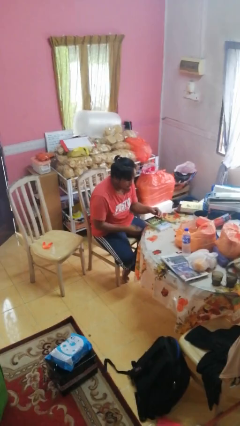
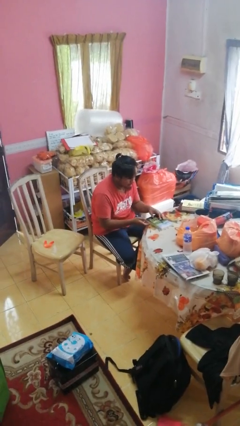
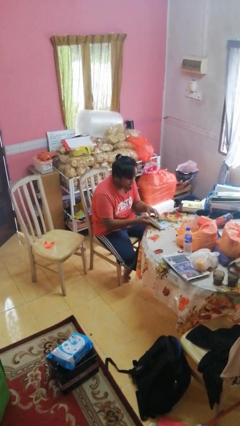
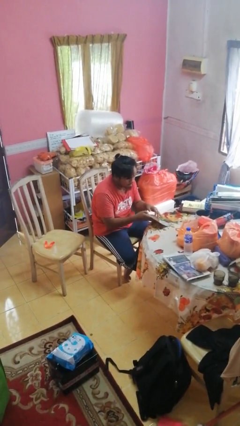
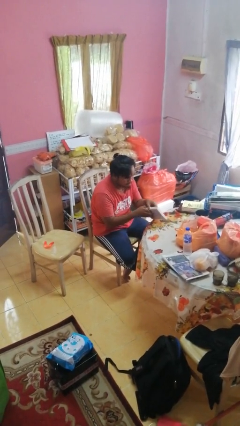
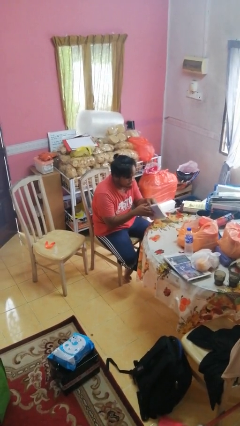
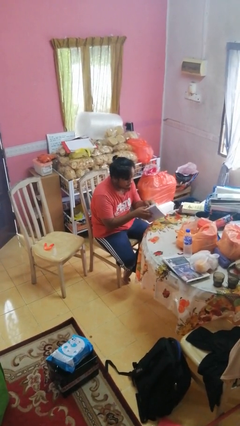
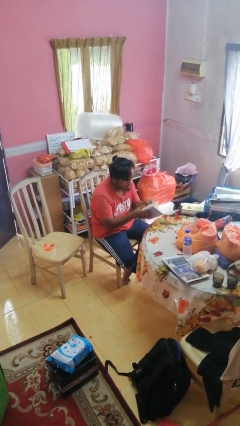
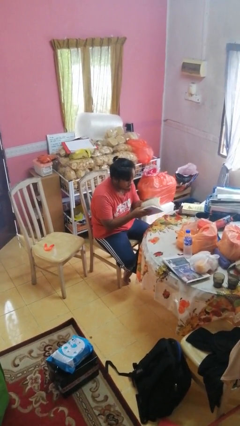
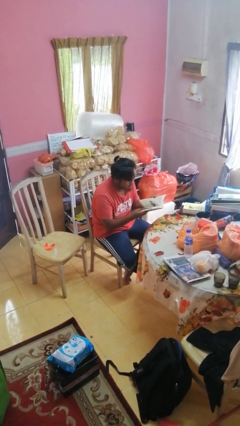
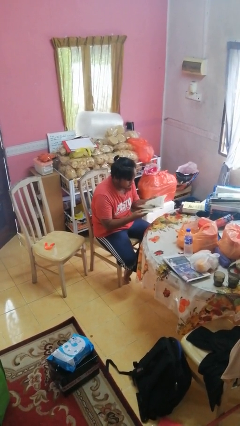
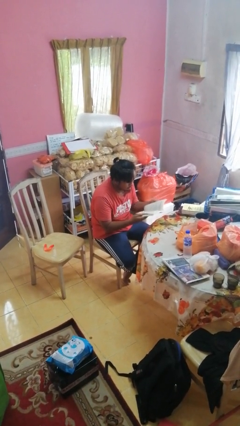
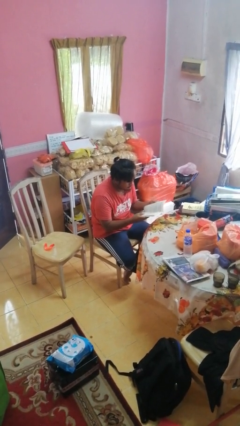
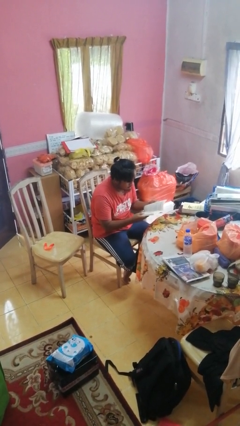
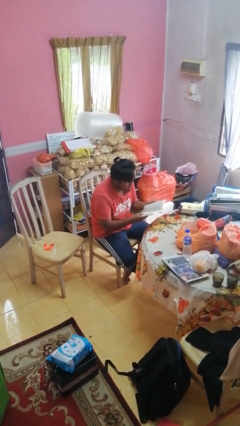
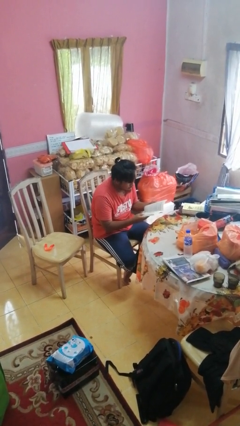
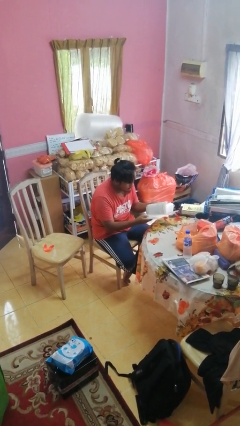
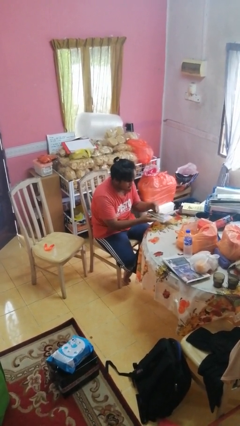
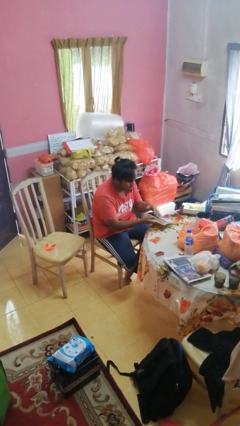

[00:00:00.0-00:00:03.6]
person reads book

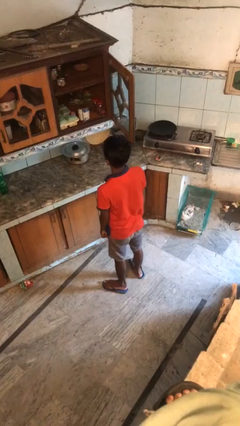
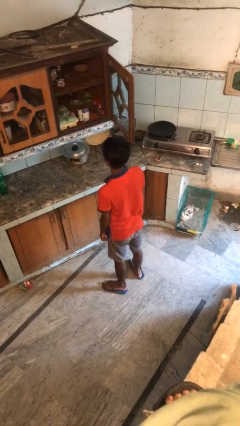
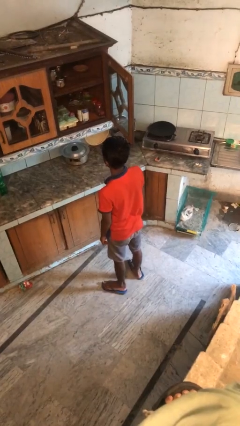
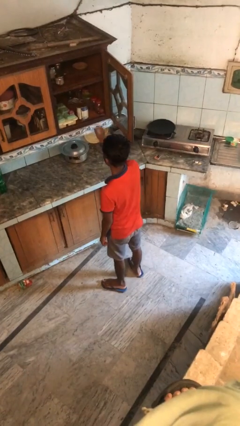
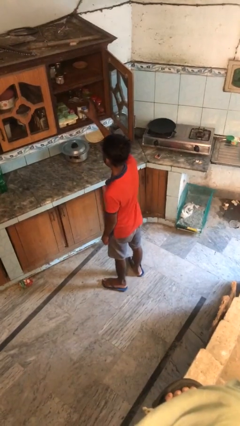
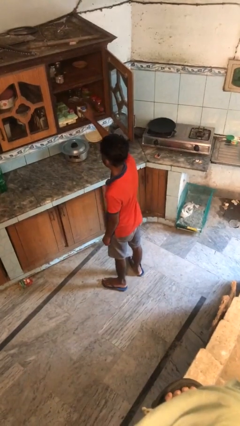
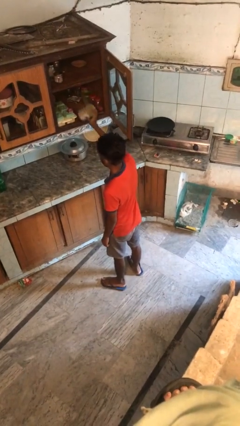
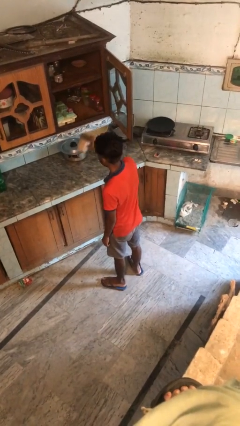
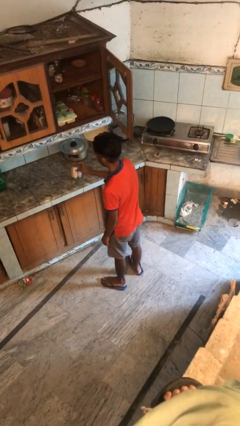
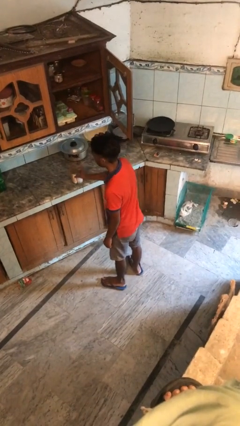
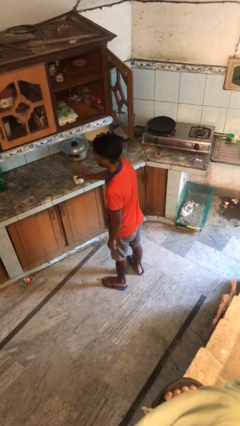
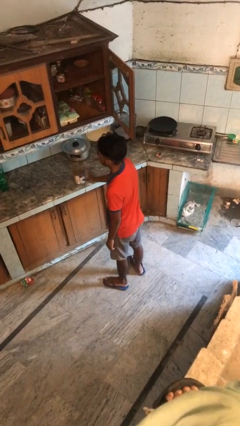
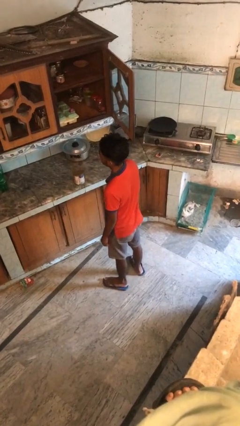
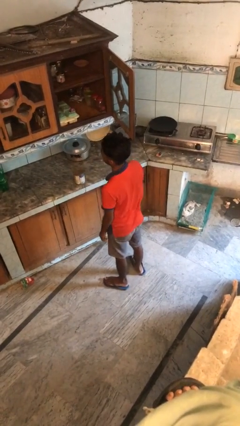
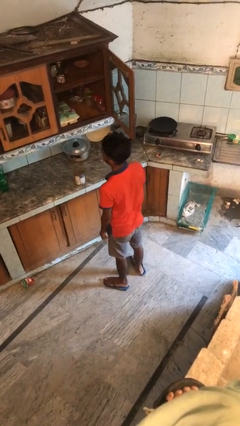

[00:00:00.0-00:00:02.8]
person takes object from cabinet

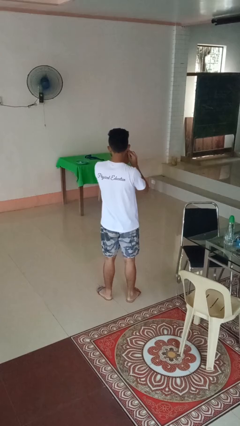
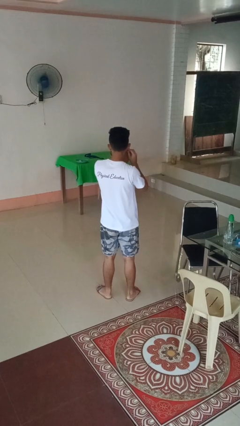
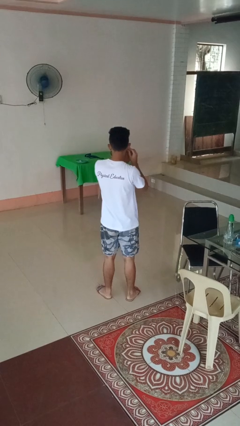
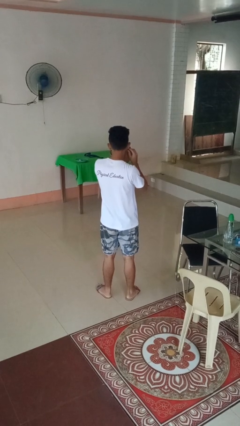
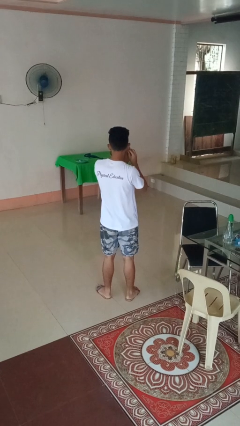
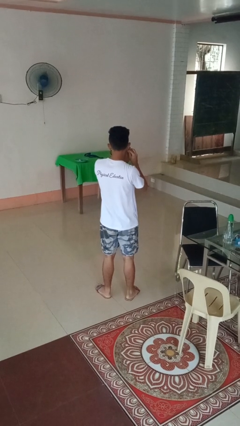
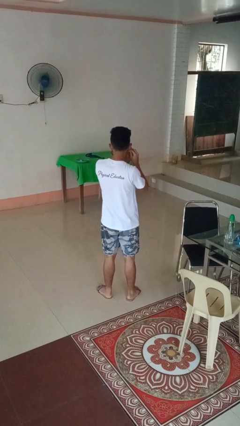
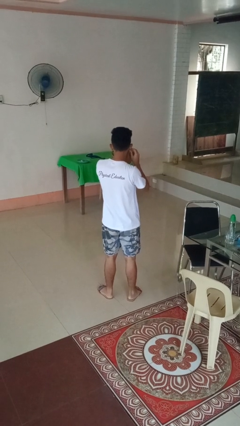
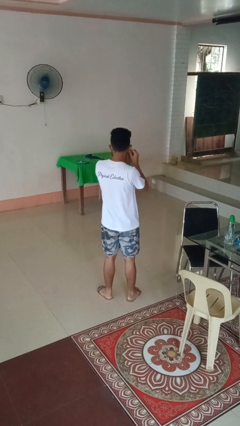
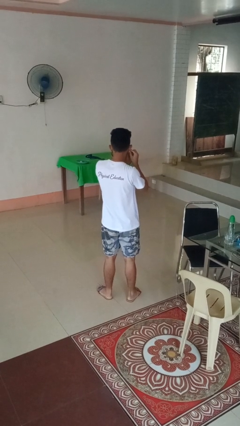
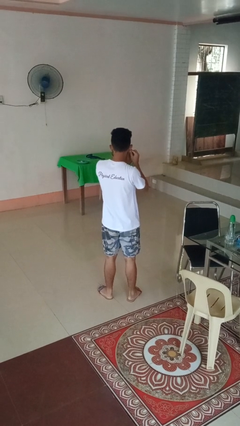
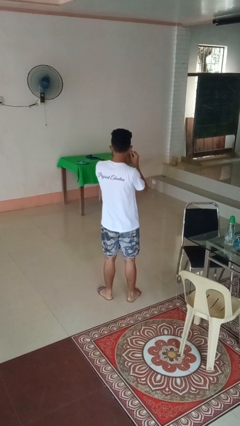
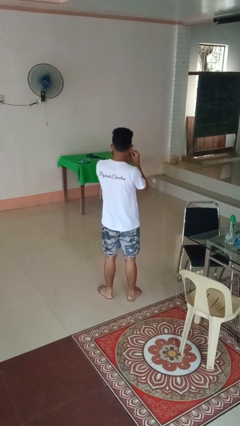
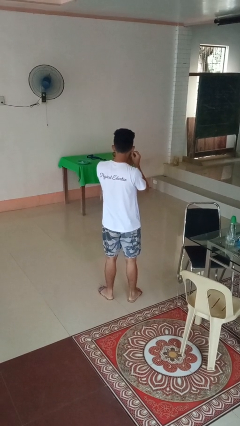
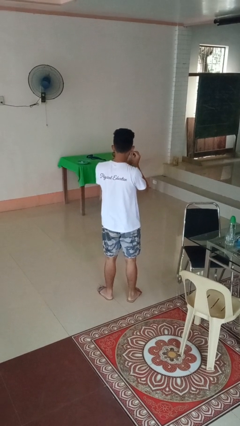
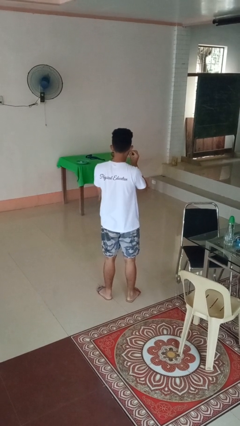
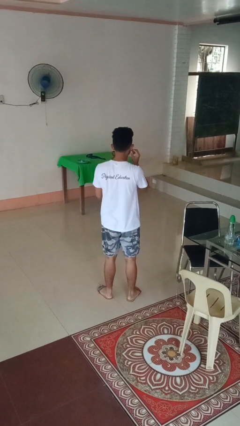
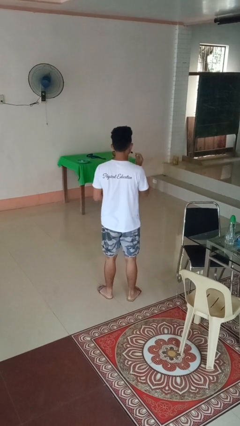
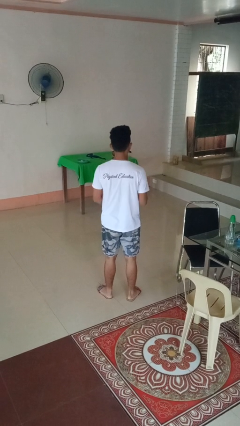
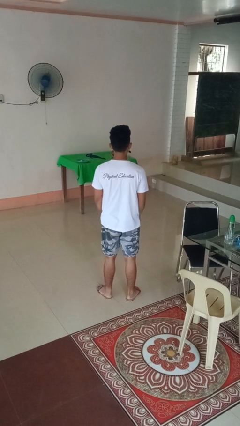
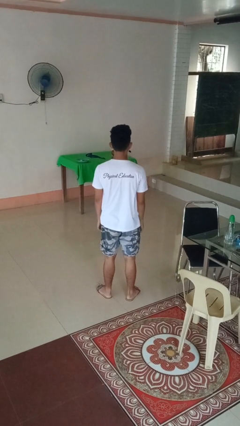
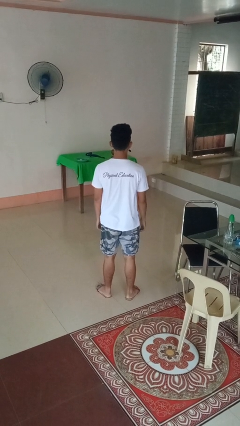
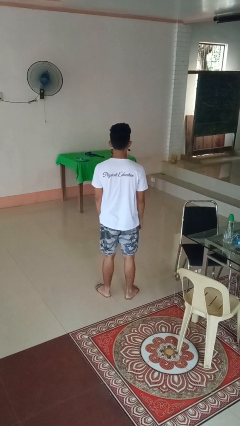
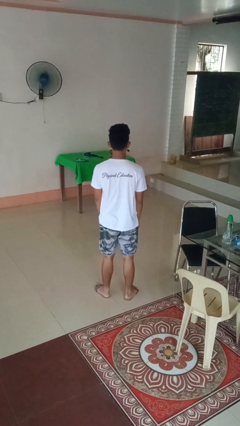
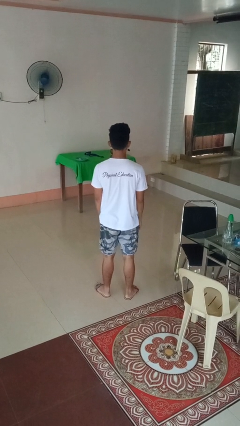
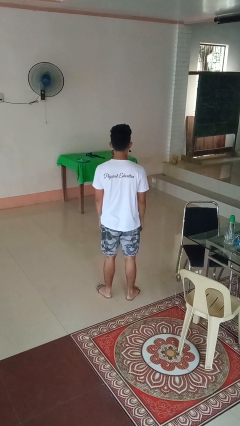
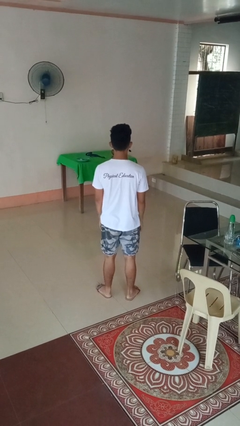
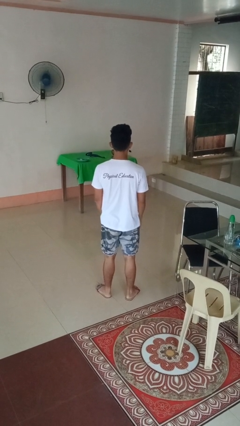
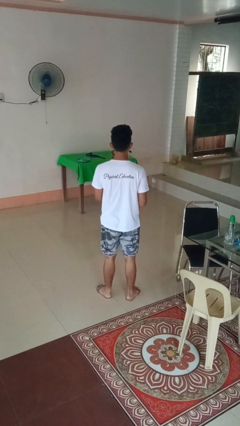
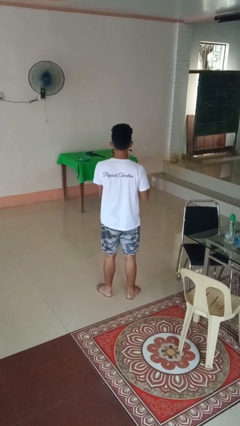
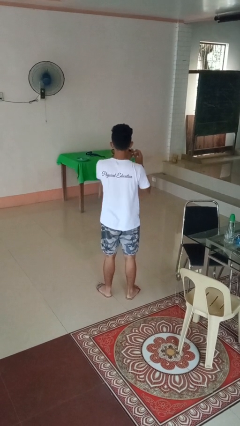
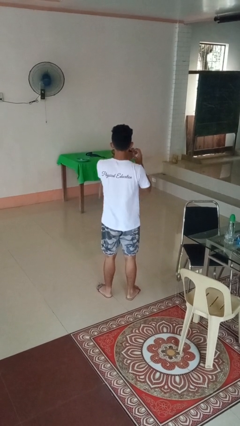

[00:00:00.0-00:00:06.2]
person puts on earrings

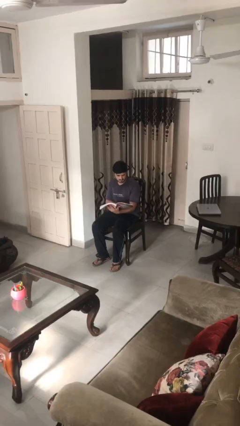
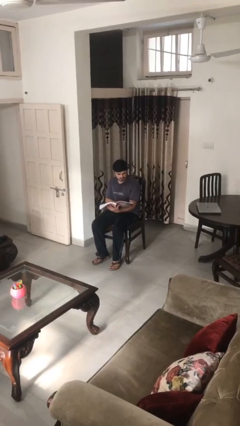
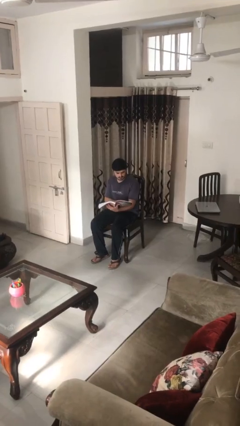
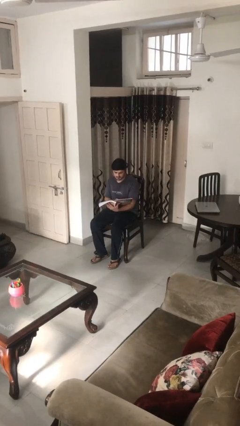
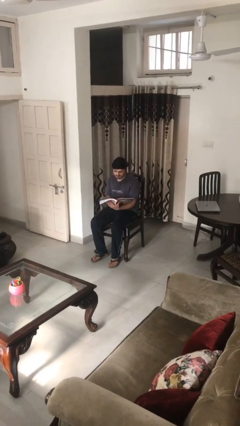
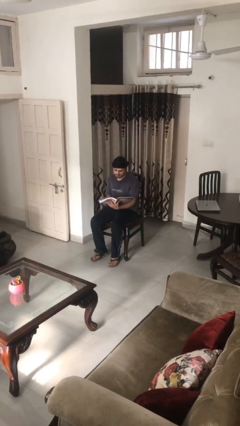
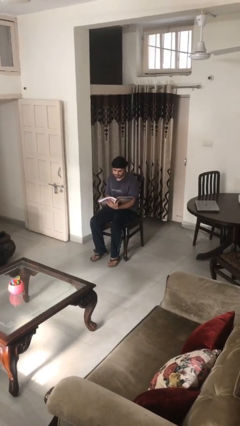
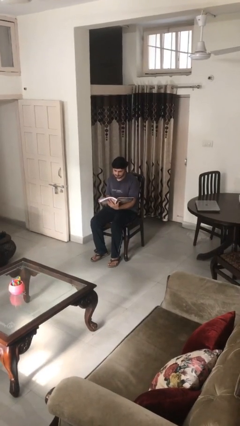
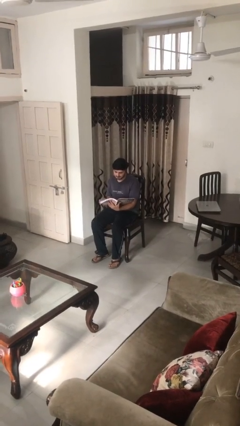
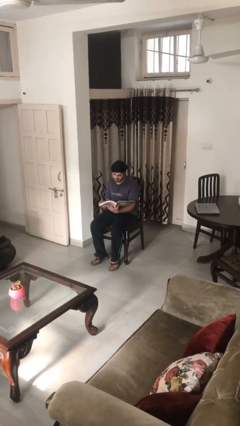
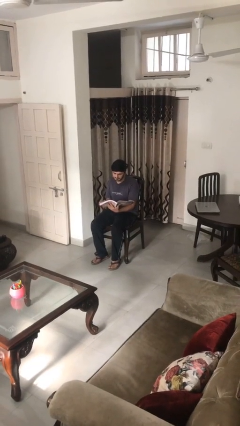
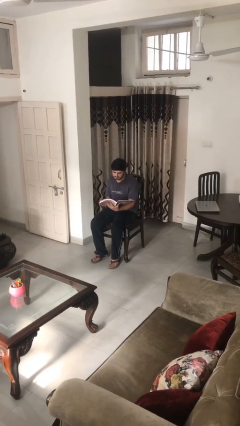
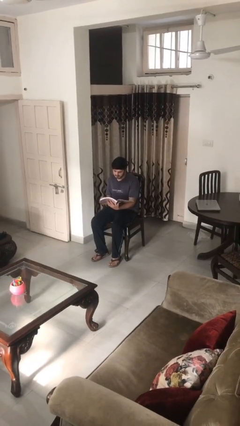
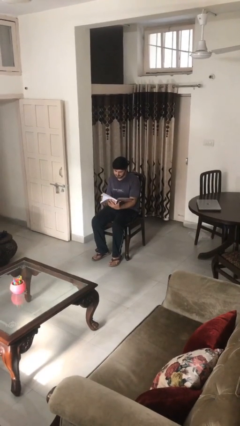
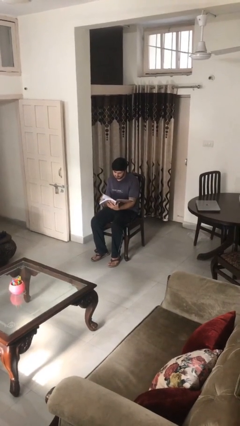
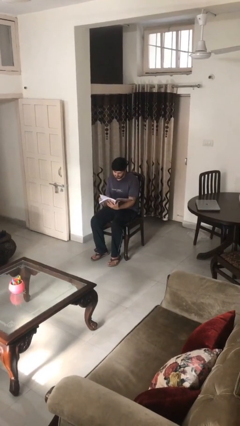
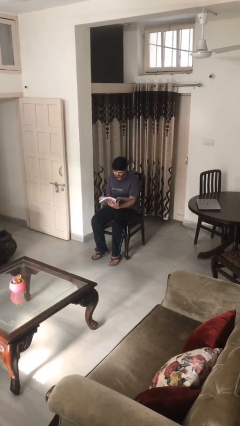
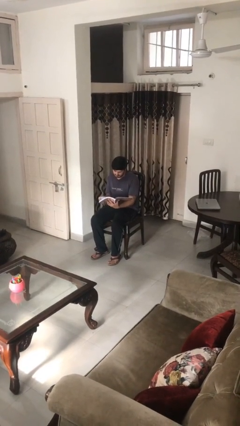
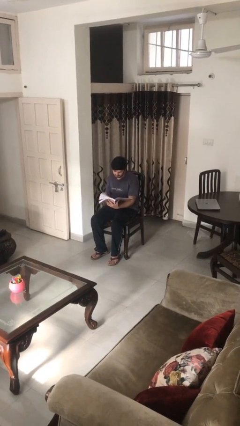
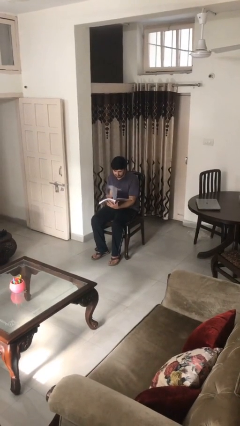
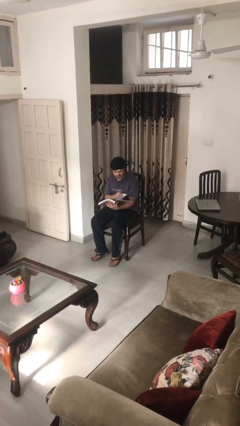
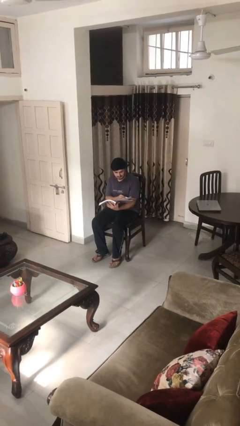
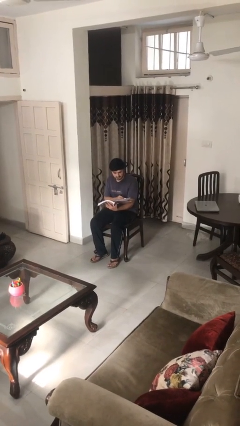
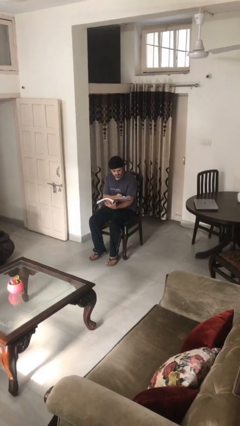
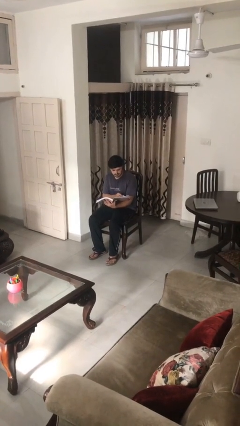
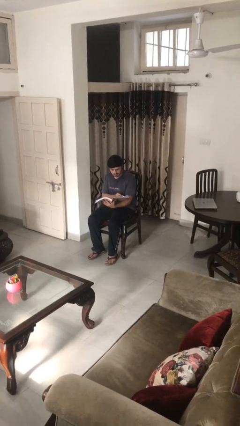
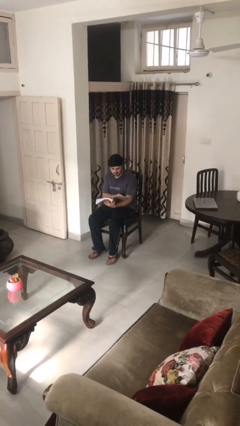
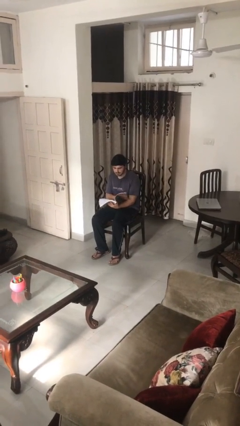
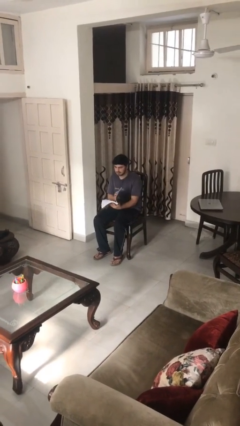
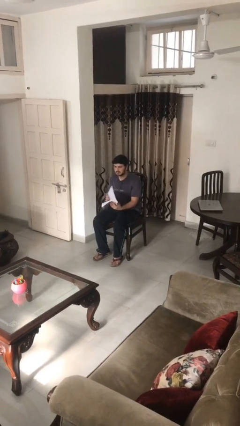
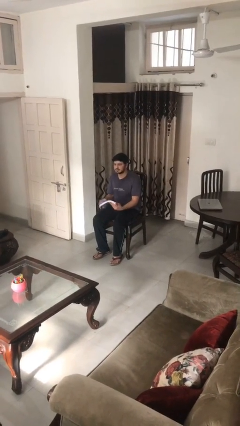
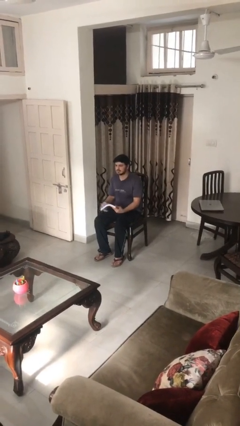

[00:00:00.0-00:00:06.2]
person reads document
